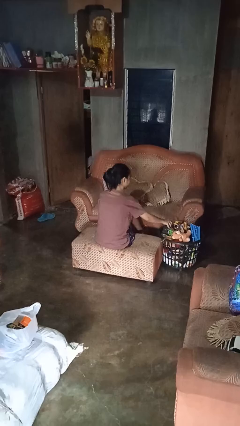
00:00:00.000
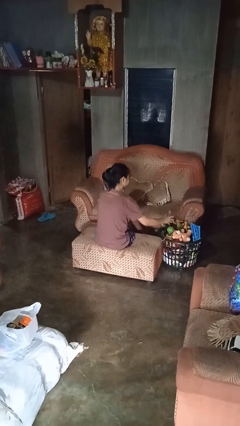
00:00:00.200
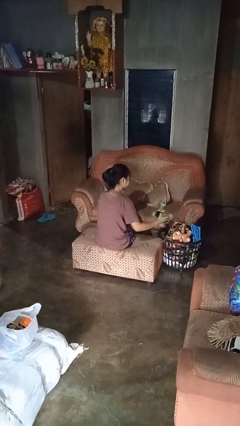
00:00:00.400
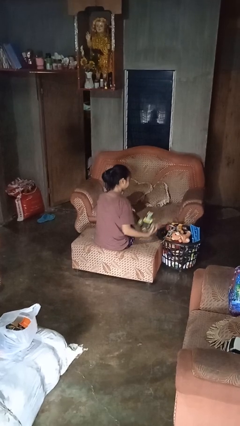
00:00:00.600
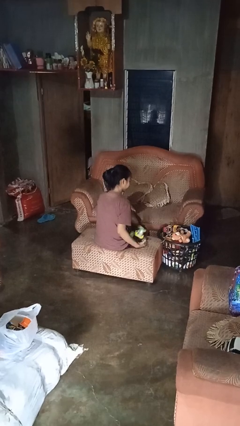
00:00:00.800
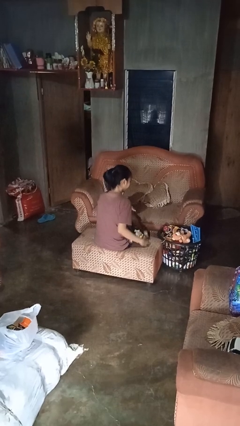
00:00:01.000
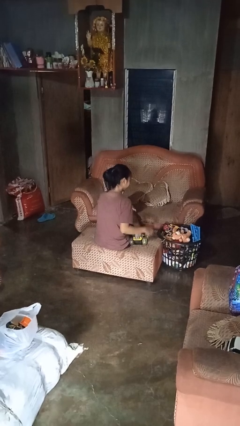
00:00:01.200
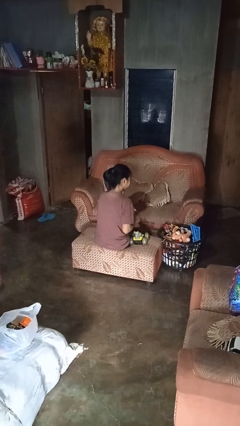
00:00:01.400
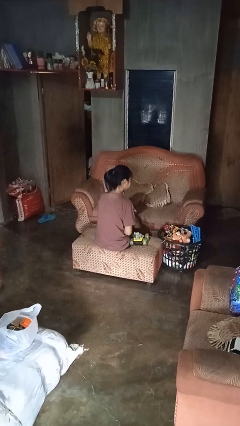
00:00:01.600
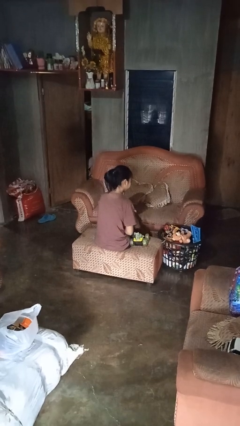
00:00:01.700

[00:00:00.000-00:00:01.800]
person takes object from basket

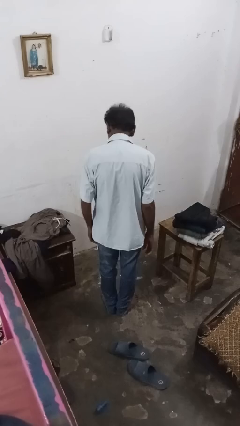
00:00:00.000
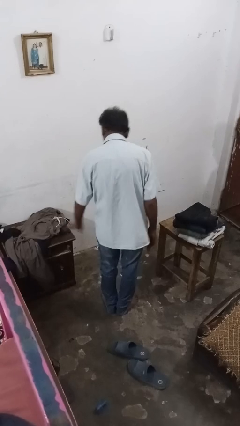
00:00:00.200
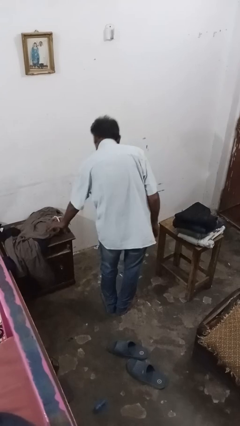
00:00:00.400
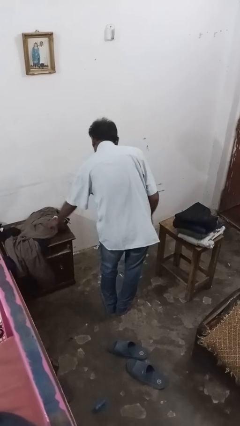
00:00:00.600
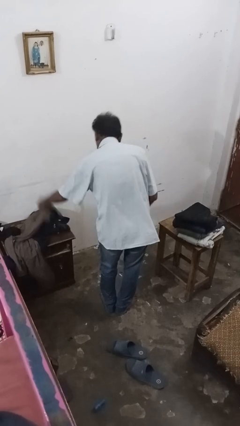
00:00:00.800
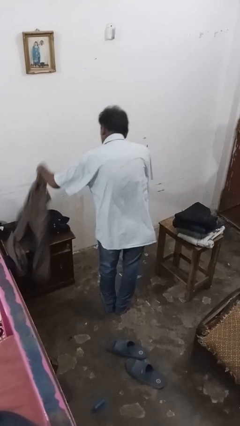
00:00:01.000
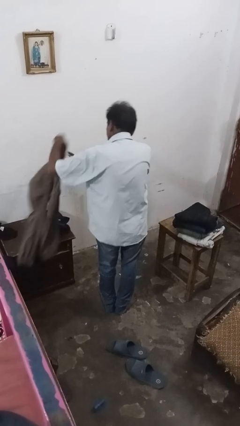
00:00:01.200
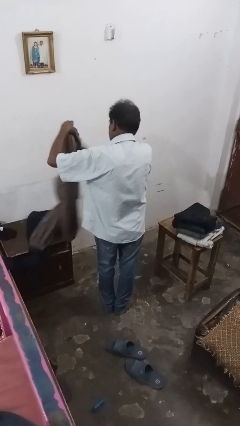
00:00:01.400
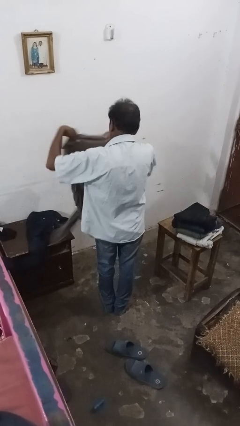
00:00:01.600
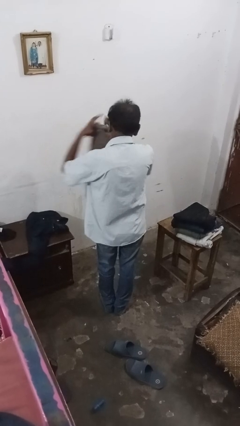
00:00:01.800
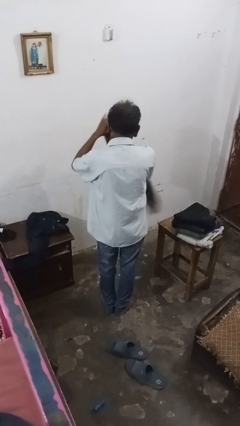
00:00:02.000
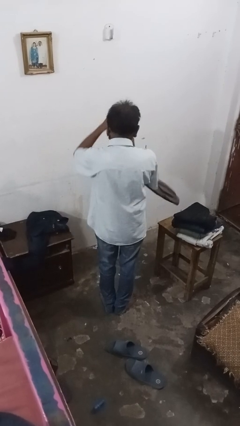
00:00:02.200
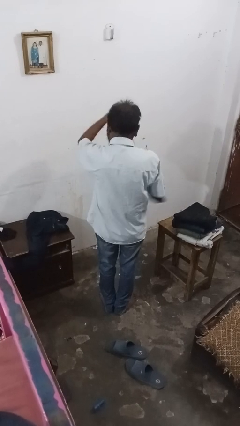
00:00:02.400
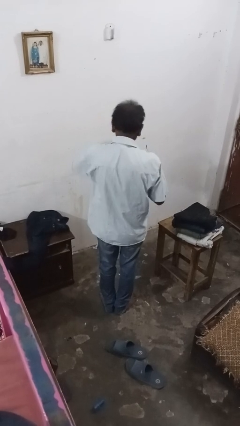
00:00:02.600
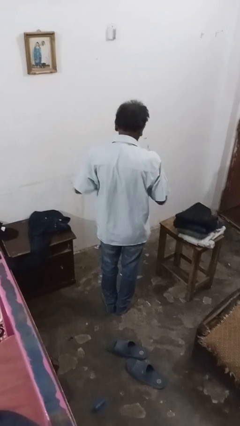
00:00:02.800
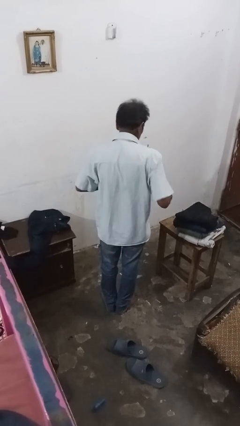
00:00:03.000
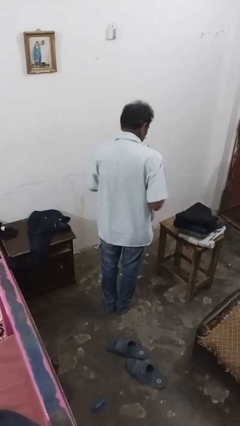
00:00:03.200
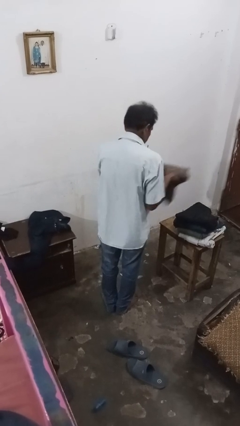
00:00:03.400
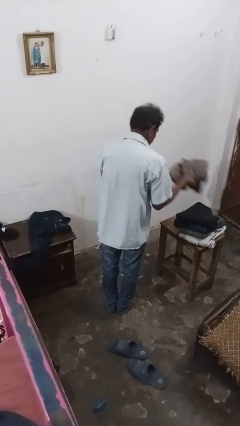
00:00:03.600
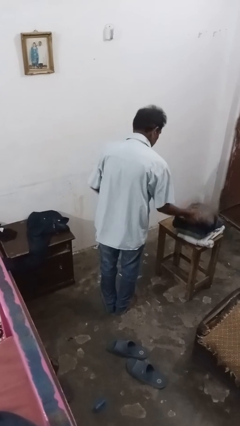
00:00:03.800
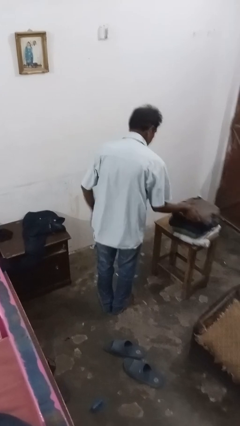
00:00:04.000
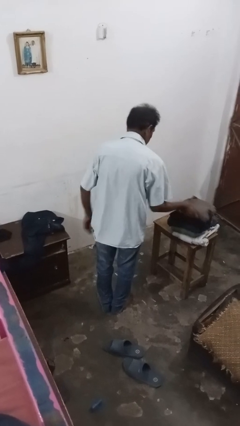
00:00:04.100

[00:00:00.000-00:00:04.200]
person folds pants

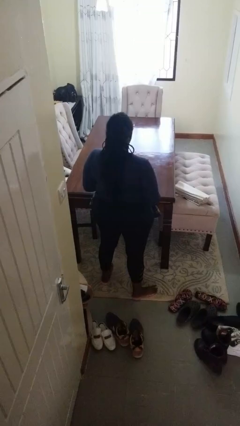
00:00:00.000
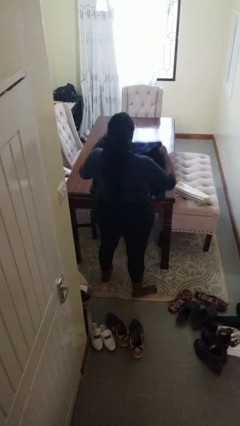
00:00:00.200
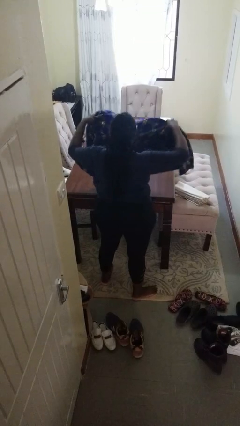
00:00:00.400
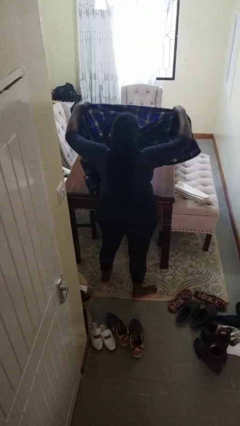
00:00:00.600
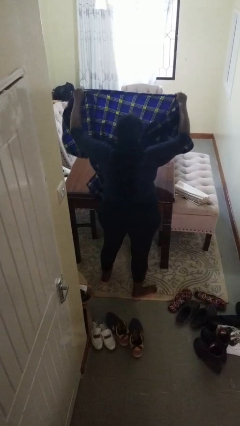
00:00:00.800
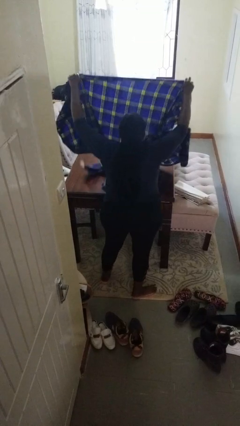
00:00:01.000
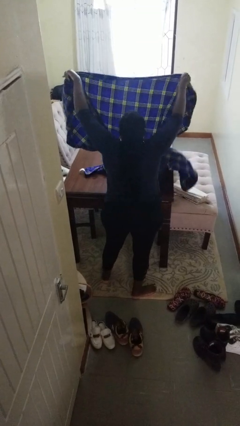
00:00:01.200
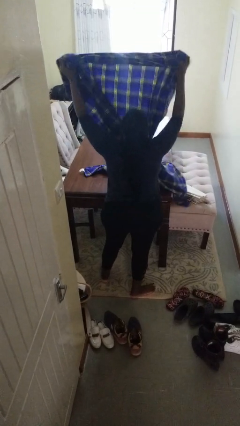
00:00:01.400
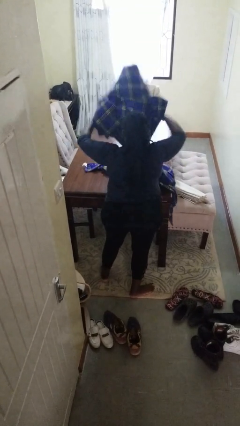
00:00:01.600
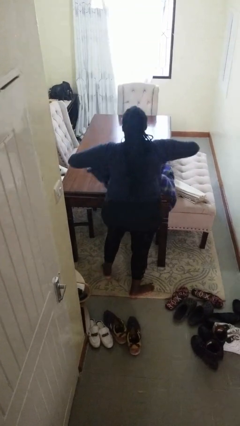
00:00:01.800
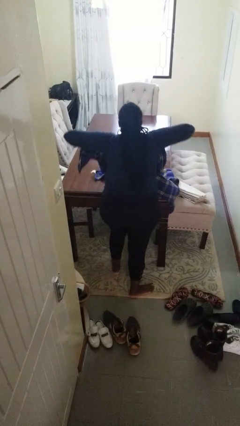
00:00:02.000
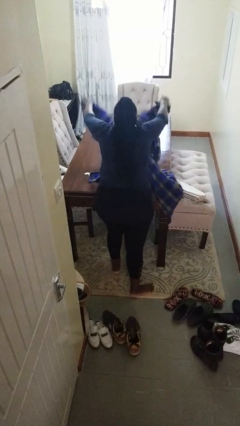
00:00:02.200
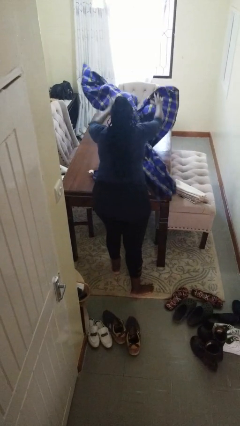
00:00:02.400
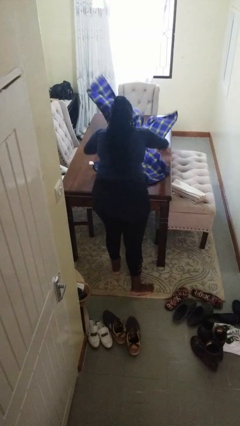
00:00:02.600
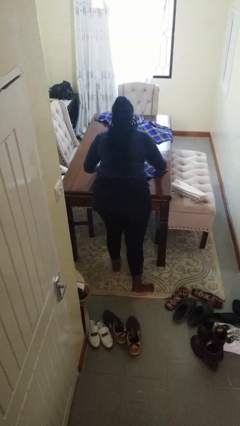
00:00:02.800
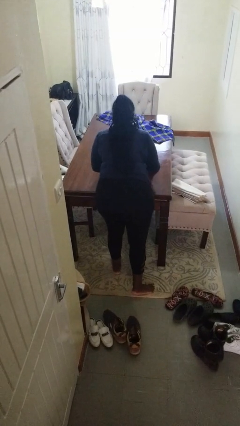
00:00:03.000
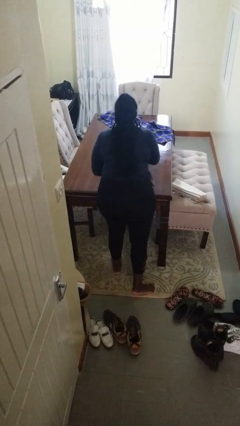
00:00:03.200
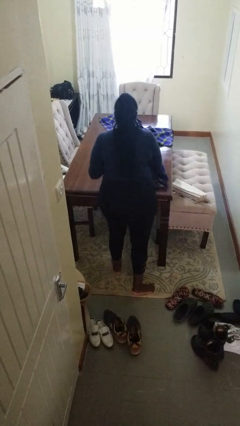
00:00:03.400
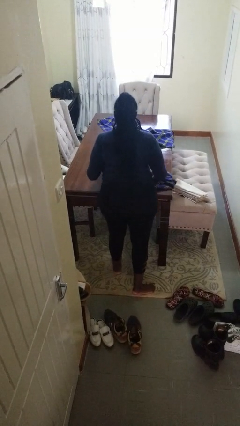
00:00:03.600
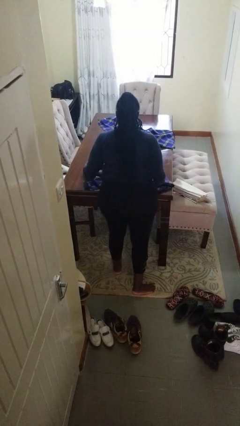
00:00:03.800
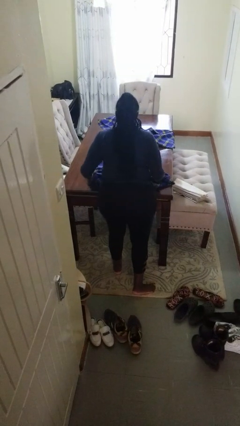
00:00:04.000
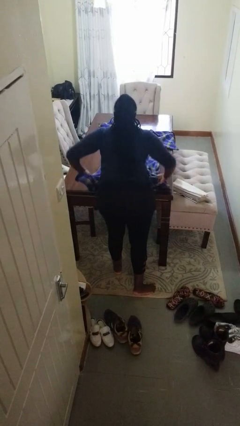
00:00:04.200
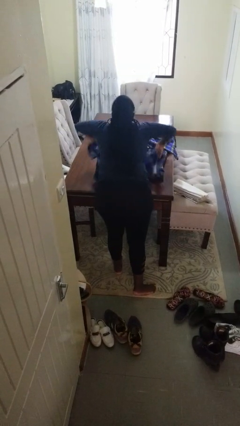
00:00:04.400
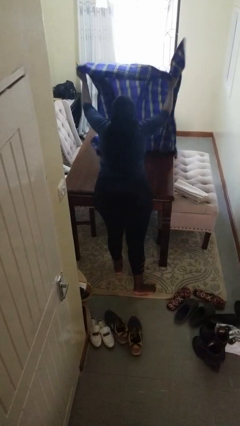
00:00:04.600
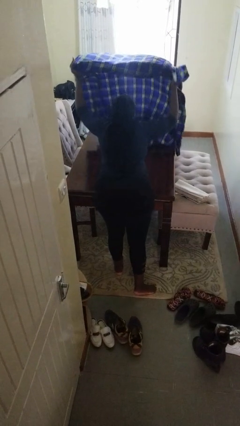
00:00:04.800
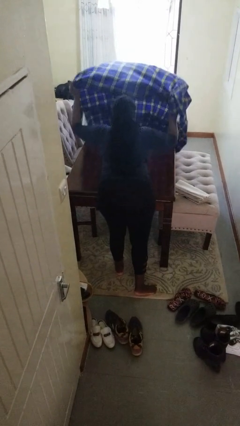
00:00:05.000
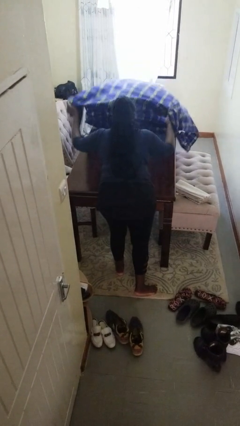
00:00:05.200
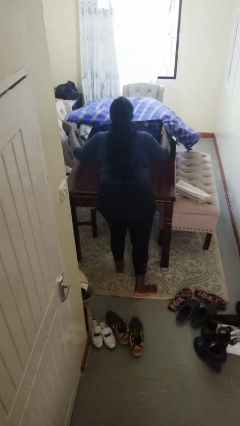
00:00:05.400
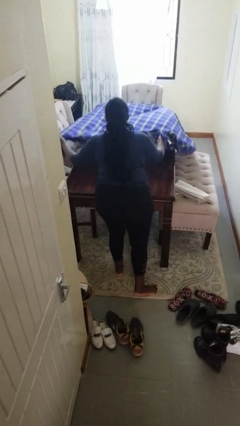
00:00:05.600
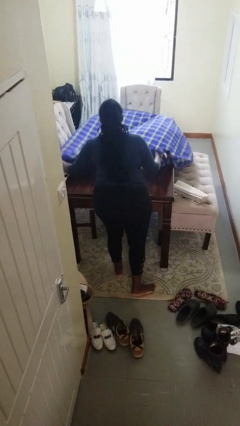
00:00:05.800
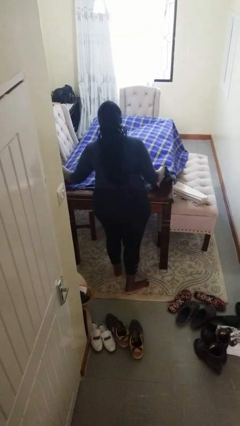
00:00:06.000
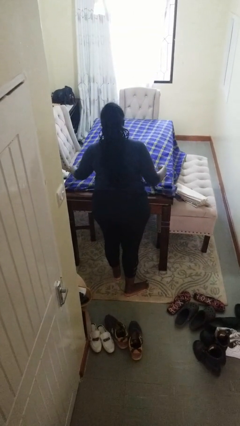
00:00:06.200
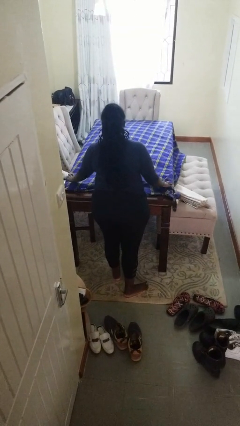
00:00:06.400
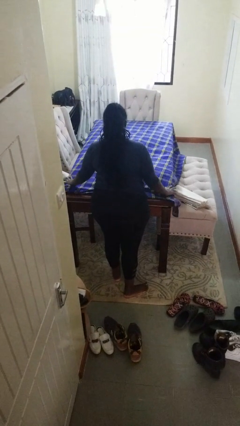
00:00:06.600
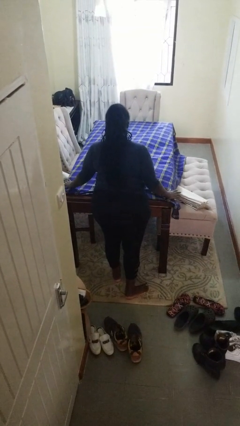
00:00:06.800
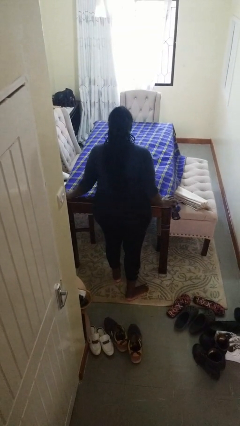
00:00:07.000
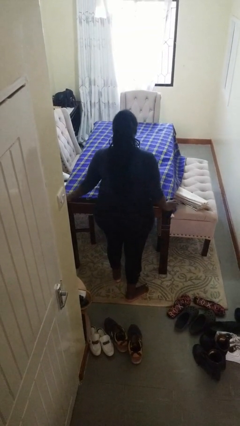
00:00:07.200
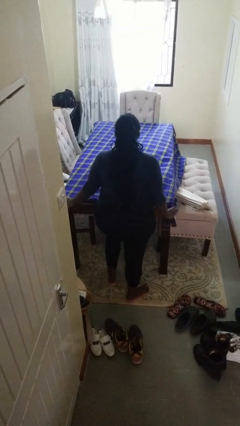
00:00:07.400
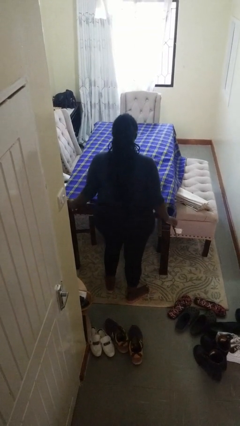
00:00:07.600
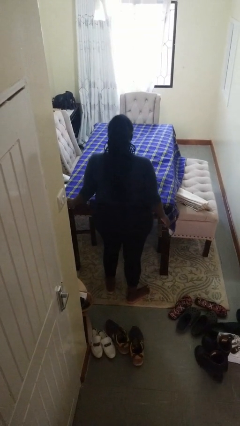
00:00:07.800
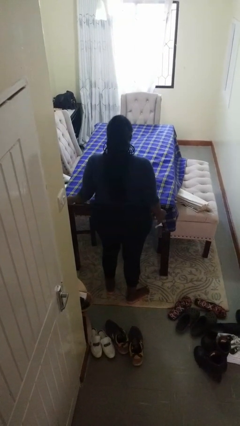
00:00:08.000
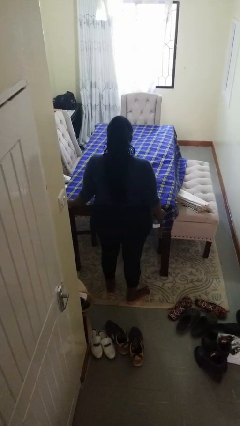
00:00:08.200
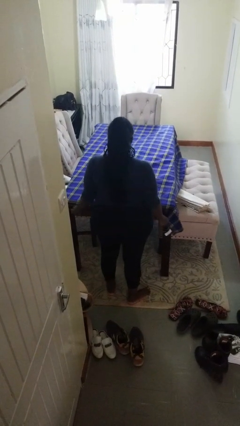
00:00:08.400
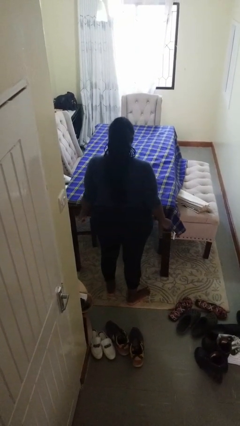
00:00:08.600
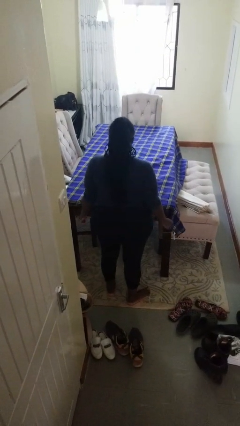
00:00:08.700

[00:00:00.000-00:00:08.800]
person spreads tablecloth

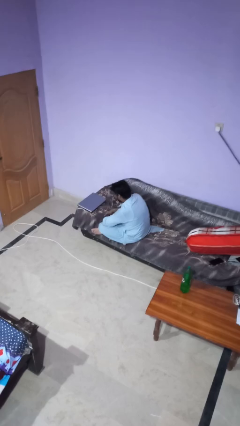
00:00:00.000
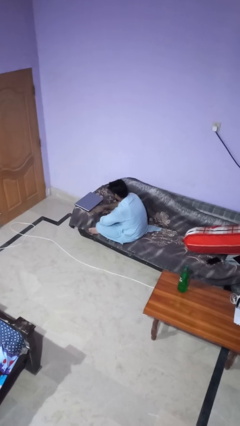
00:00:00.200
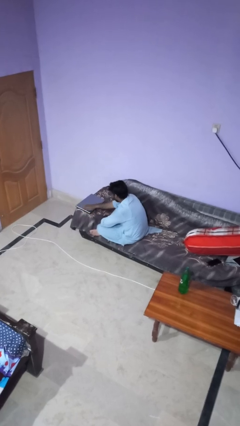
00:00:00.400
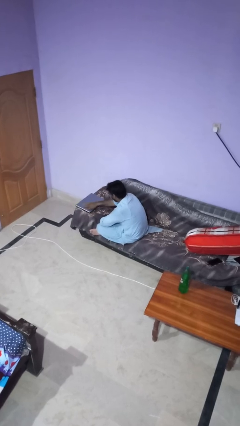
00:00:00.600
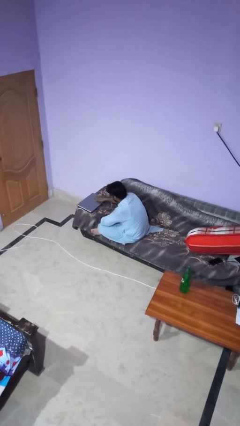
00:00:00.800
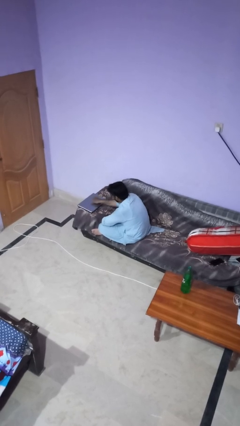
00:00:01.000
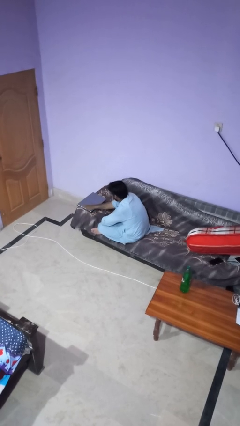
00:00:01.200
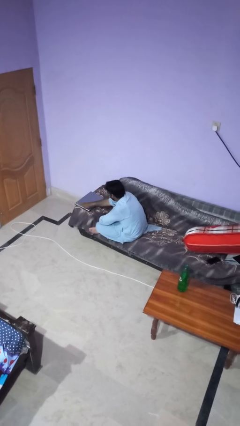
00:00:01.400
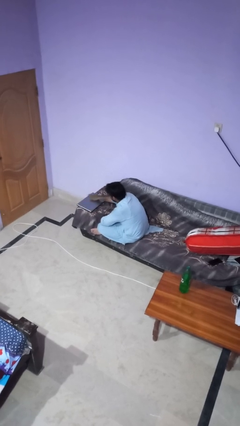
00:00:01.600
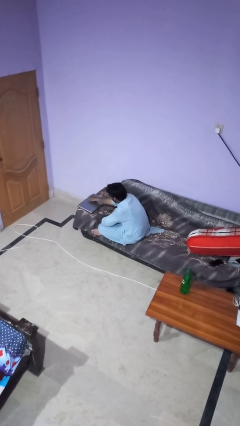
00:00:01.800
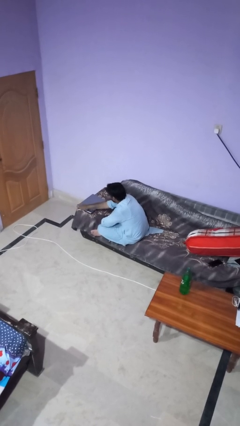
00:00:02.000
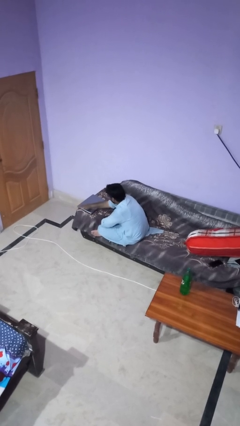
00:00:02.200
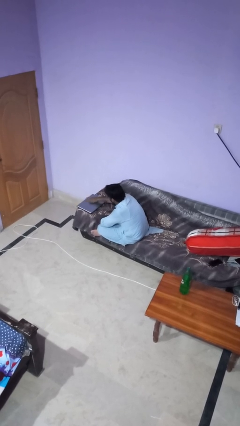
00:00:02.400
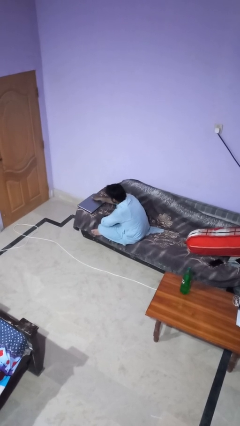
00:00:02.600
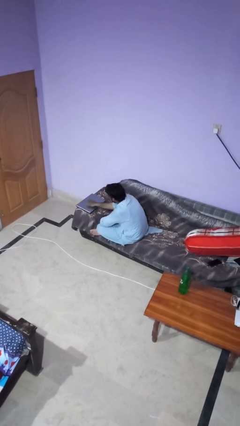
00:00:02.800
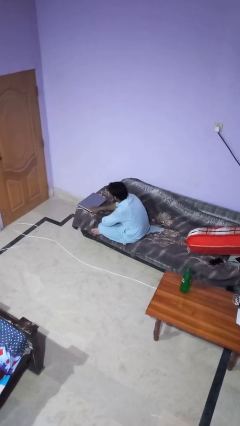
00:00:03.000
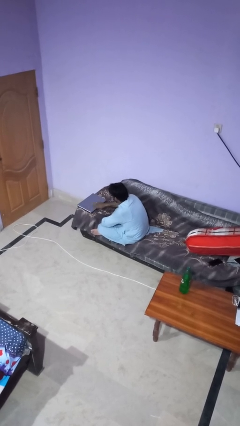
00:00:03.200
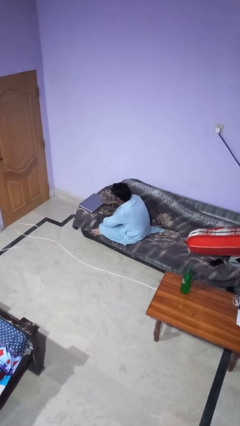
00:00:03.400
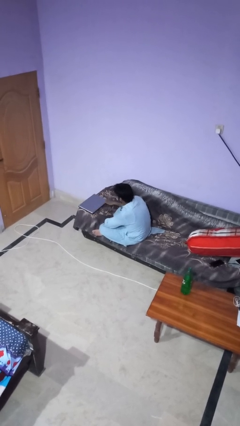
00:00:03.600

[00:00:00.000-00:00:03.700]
person waves hand over object
